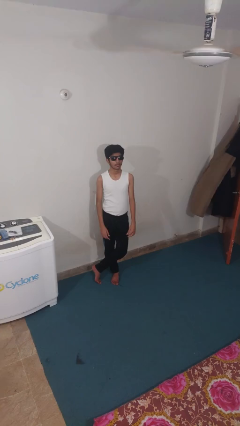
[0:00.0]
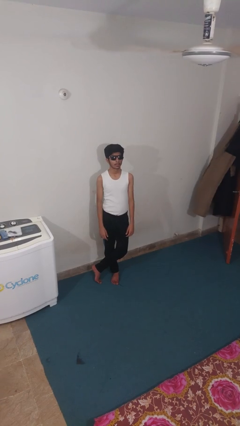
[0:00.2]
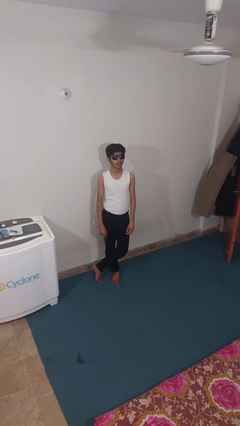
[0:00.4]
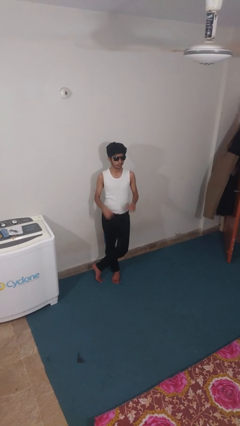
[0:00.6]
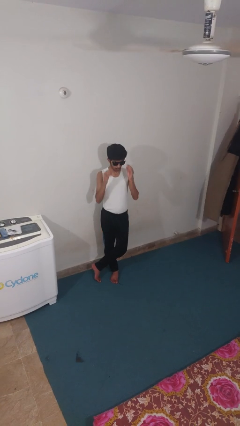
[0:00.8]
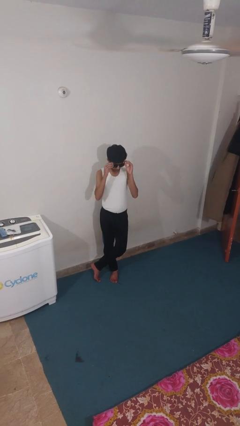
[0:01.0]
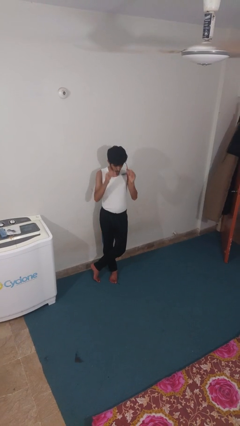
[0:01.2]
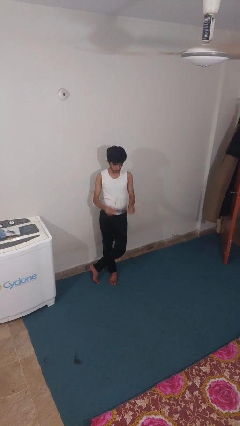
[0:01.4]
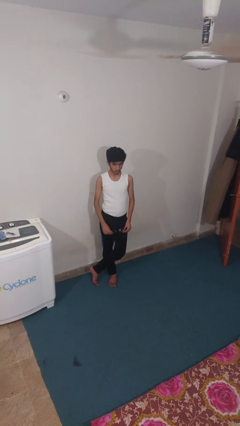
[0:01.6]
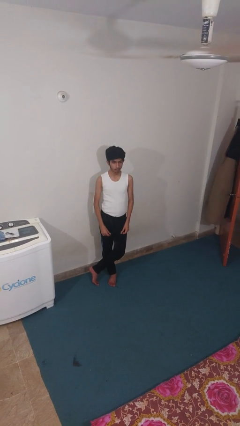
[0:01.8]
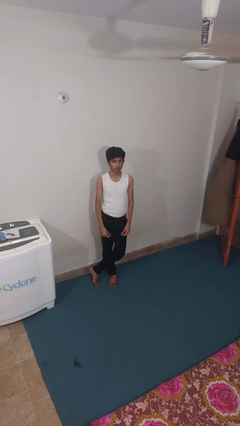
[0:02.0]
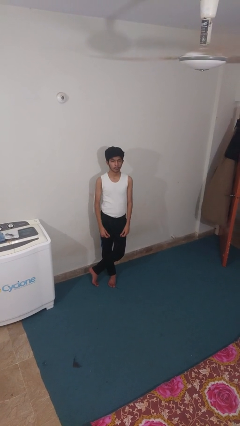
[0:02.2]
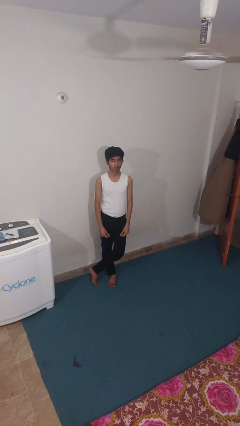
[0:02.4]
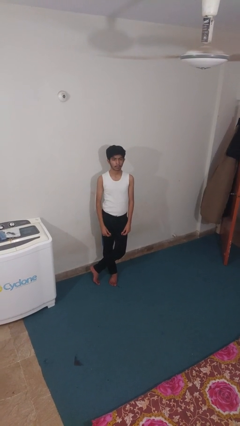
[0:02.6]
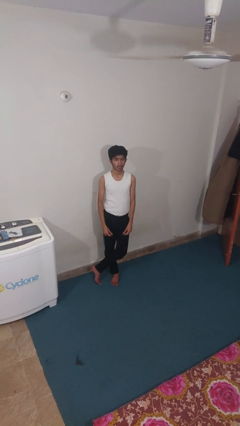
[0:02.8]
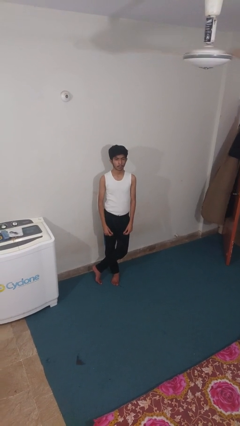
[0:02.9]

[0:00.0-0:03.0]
person takes off sunglasses

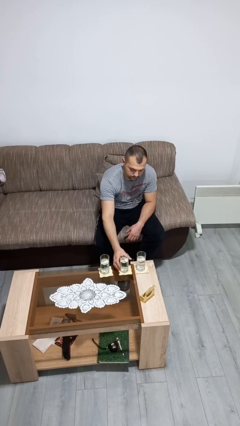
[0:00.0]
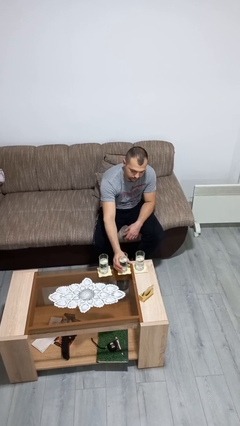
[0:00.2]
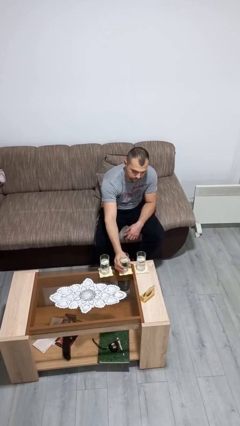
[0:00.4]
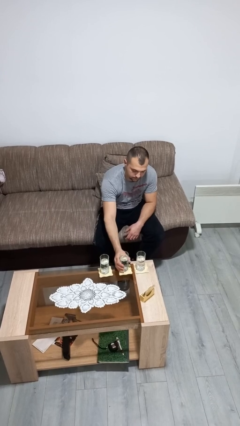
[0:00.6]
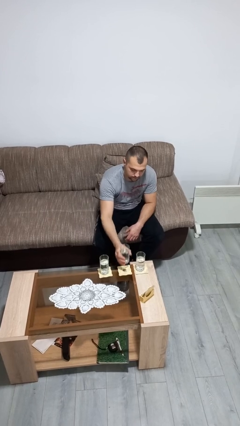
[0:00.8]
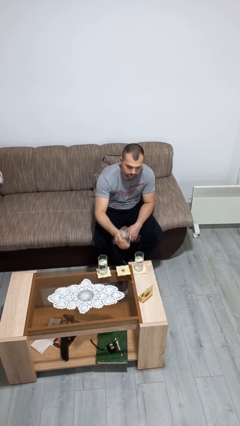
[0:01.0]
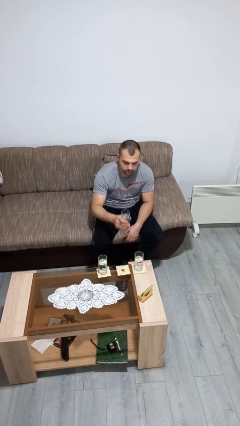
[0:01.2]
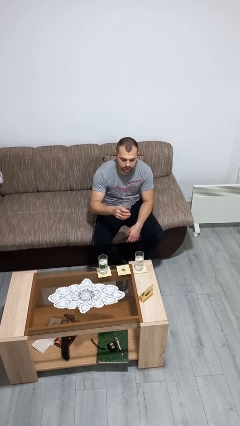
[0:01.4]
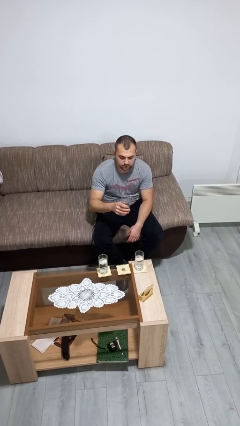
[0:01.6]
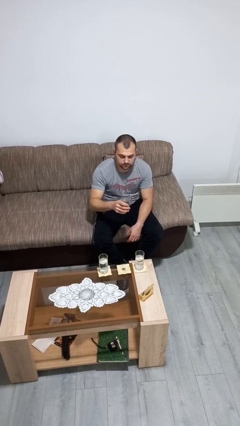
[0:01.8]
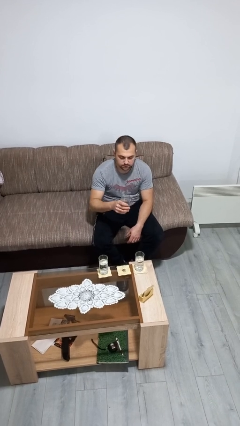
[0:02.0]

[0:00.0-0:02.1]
person picks up object from table

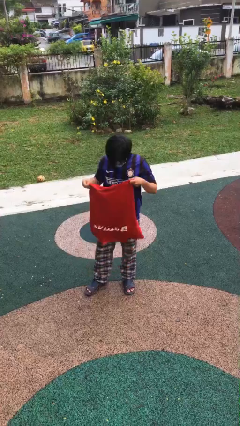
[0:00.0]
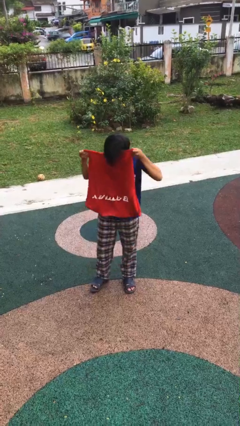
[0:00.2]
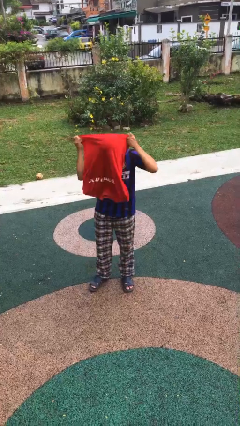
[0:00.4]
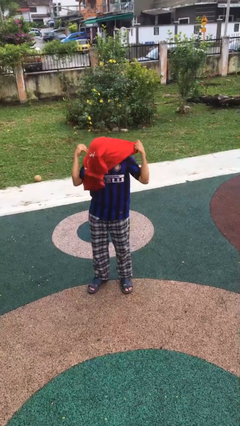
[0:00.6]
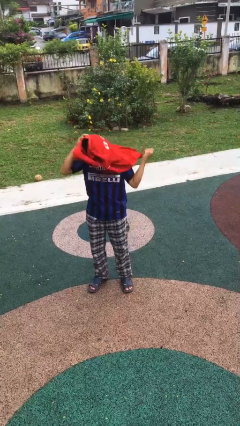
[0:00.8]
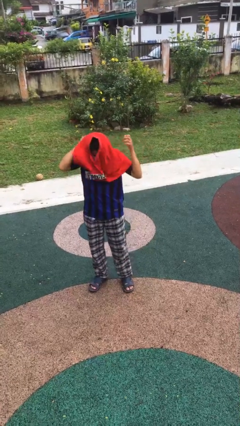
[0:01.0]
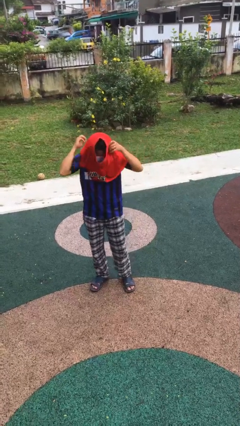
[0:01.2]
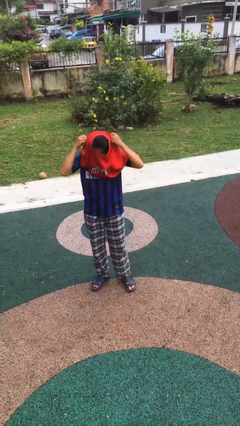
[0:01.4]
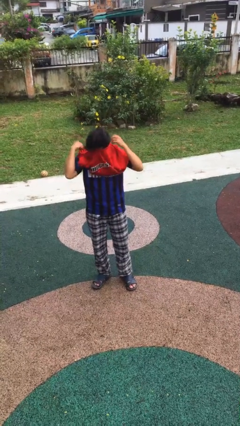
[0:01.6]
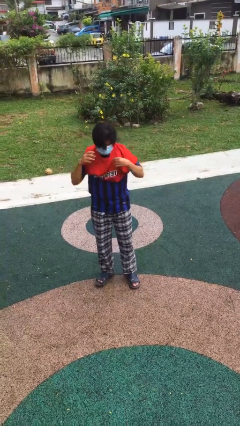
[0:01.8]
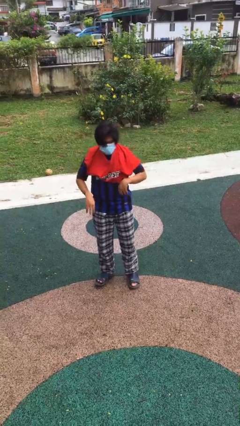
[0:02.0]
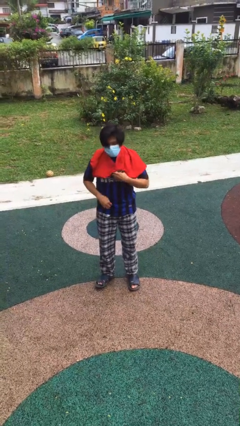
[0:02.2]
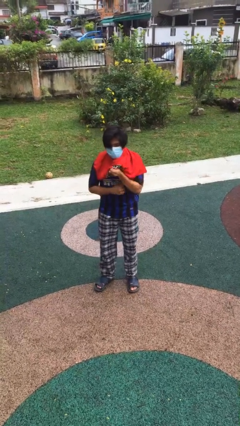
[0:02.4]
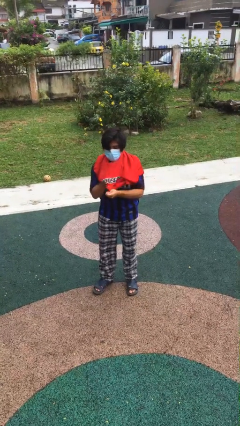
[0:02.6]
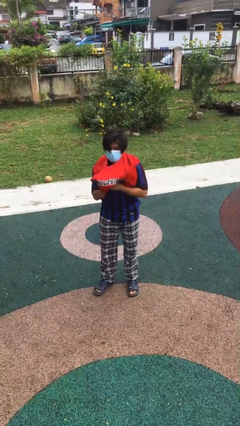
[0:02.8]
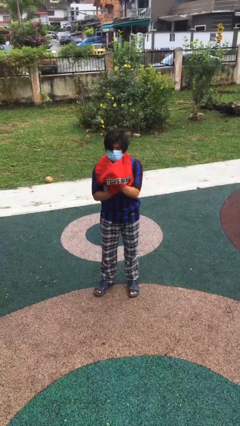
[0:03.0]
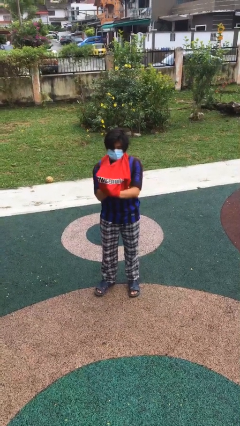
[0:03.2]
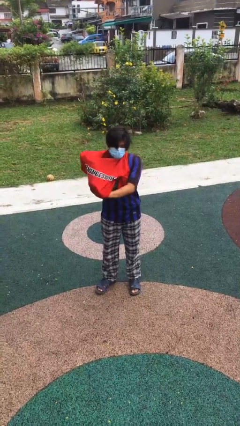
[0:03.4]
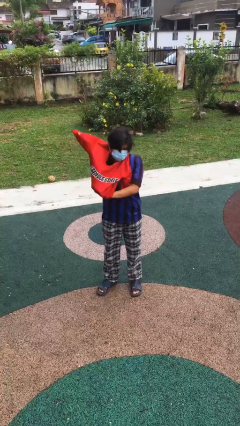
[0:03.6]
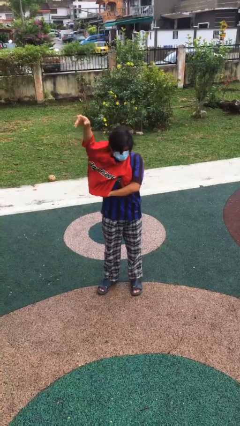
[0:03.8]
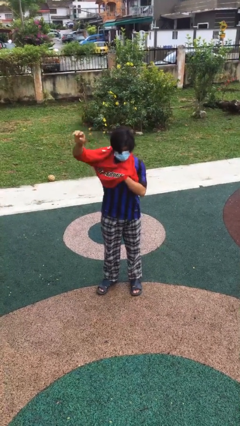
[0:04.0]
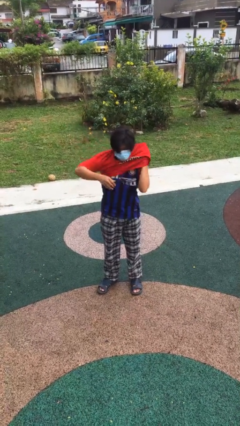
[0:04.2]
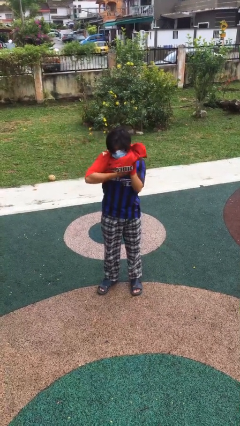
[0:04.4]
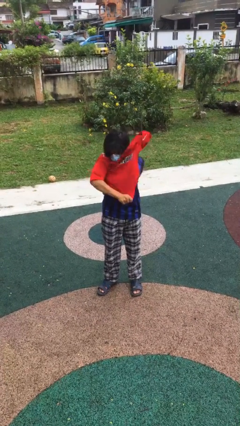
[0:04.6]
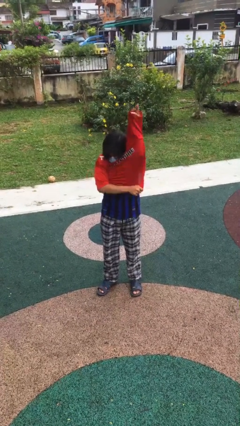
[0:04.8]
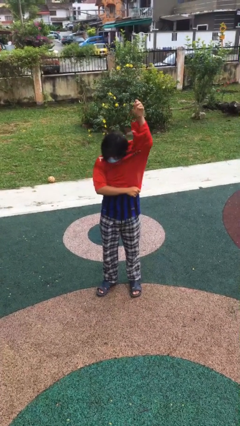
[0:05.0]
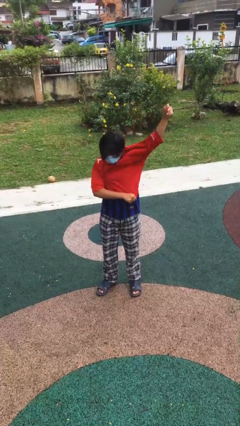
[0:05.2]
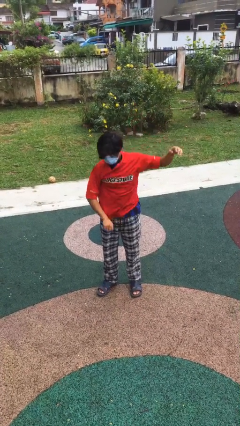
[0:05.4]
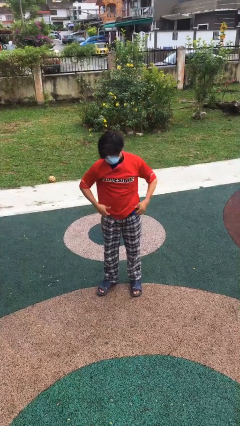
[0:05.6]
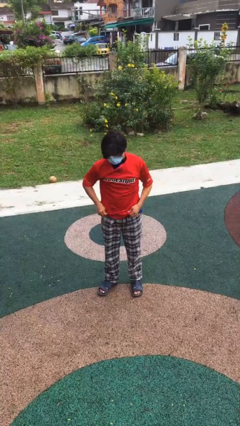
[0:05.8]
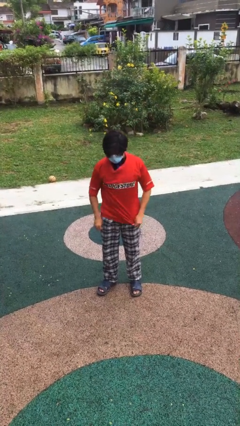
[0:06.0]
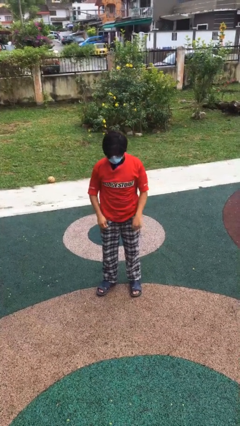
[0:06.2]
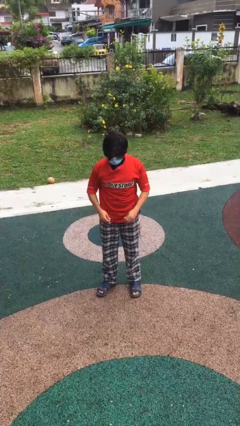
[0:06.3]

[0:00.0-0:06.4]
person puts on shirt

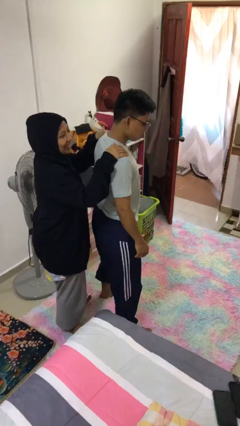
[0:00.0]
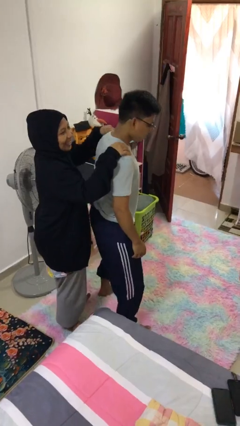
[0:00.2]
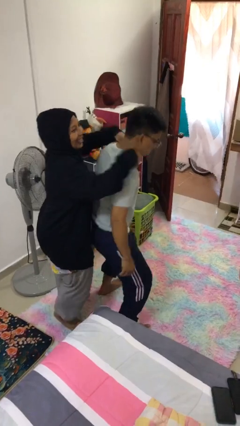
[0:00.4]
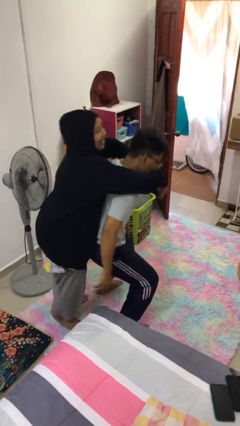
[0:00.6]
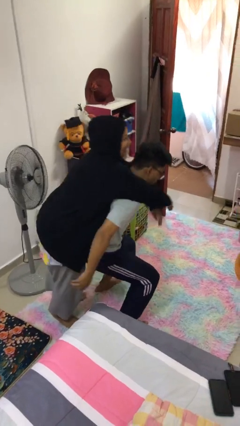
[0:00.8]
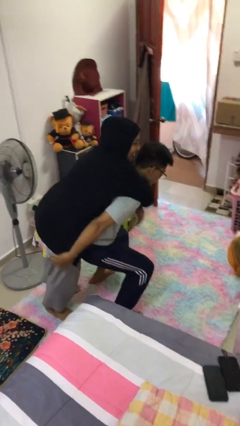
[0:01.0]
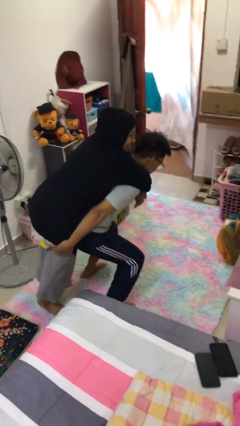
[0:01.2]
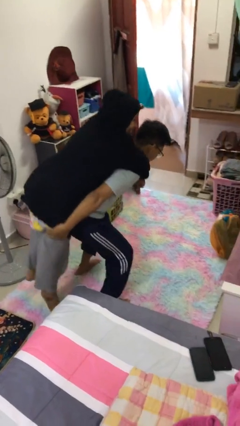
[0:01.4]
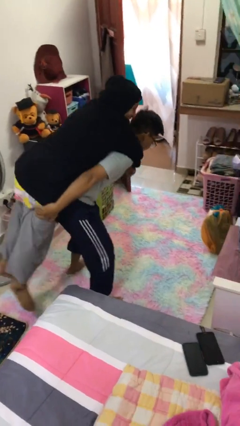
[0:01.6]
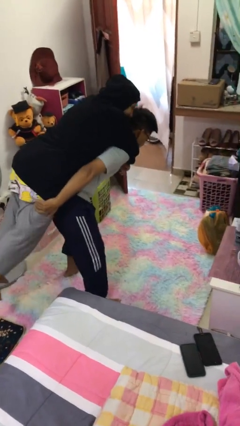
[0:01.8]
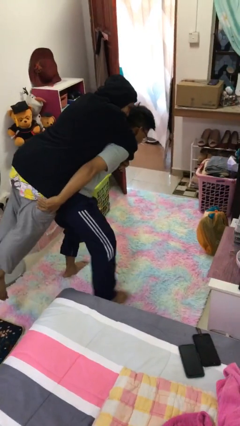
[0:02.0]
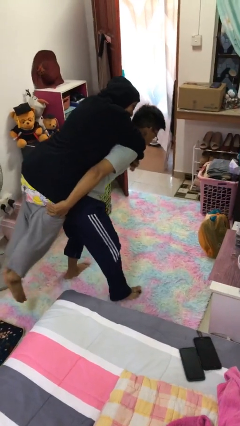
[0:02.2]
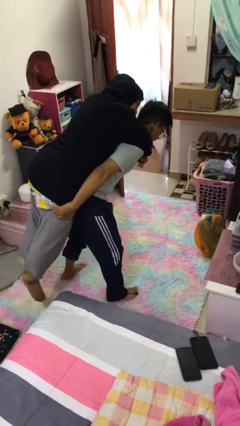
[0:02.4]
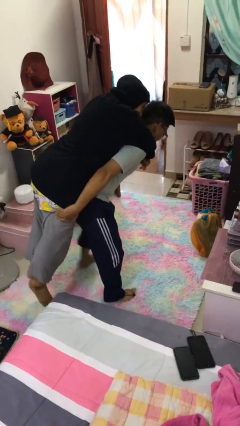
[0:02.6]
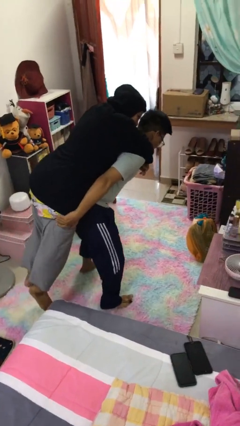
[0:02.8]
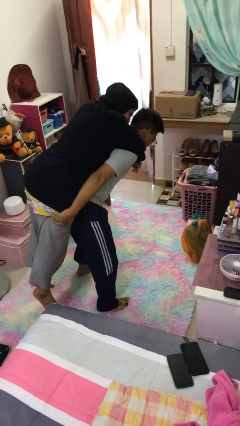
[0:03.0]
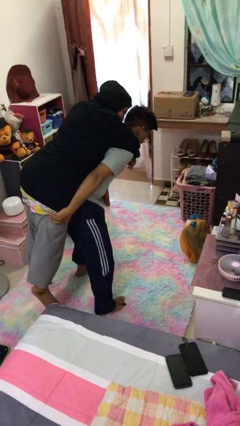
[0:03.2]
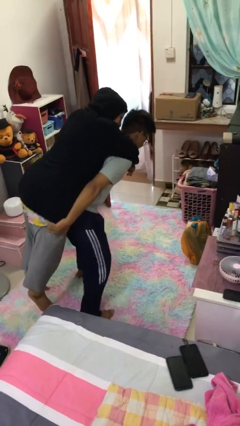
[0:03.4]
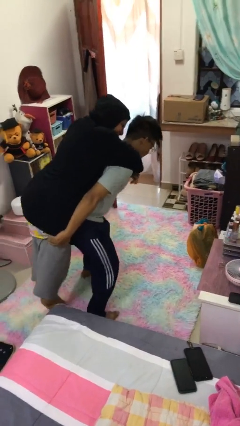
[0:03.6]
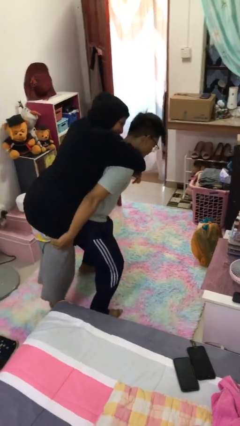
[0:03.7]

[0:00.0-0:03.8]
person carries person on back

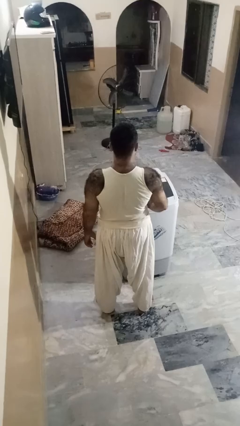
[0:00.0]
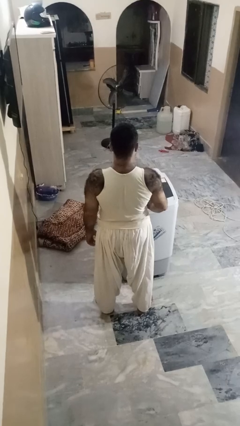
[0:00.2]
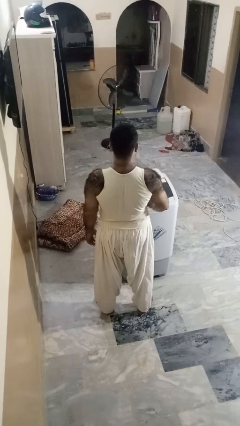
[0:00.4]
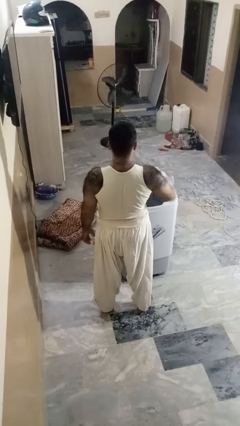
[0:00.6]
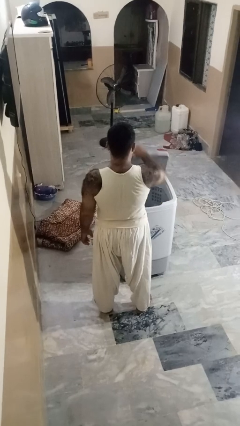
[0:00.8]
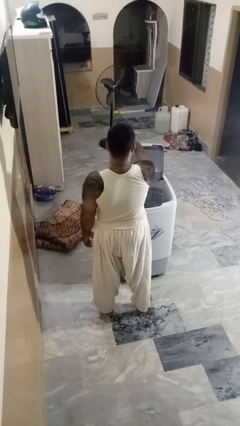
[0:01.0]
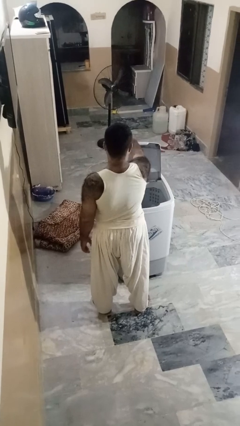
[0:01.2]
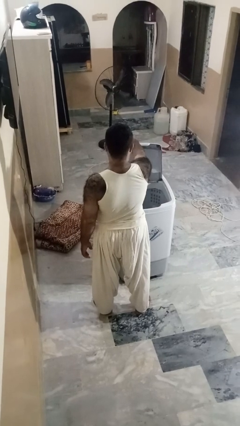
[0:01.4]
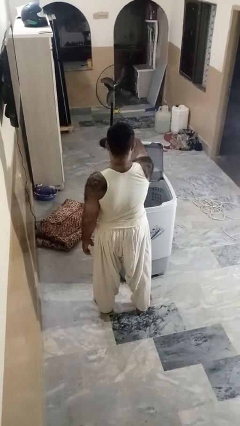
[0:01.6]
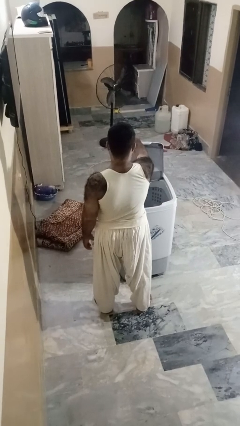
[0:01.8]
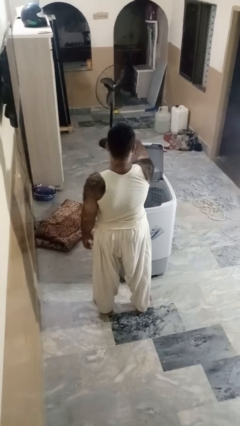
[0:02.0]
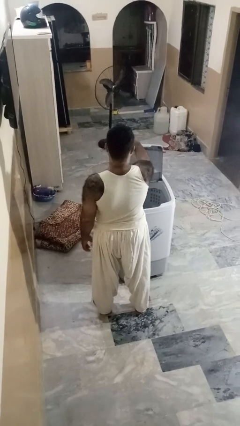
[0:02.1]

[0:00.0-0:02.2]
person opens clothes washer
